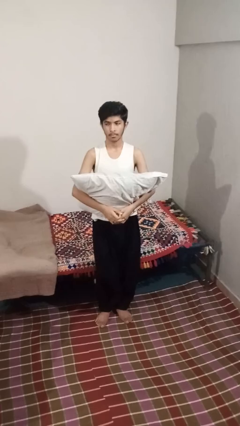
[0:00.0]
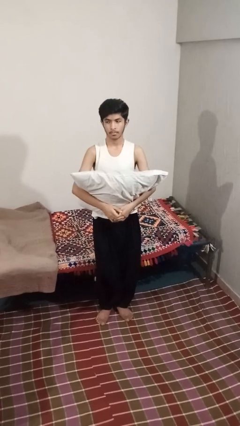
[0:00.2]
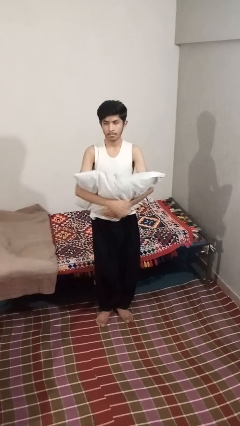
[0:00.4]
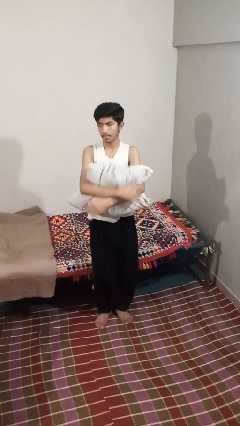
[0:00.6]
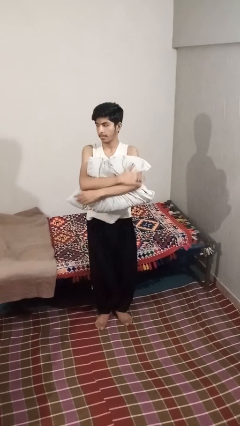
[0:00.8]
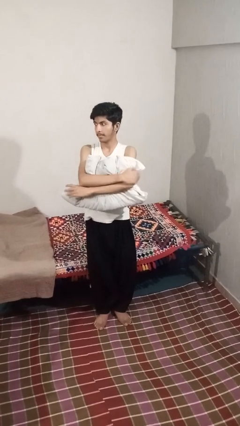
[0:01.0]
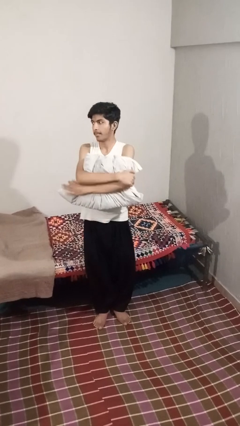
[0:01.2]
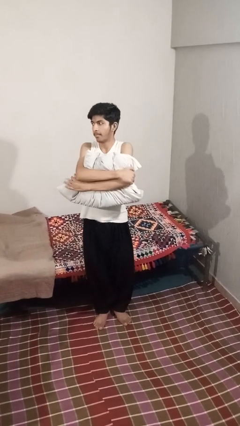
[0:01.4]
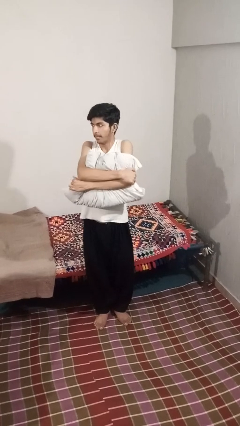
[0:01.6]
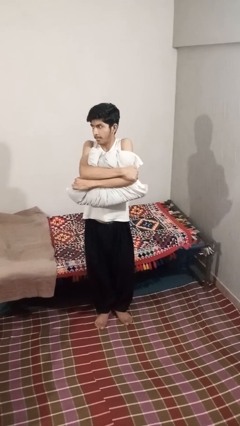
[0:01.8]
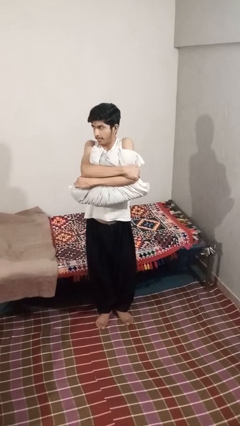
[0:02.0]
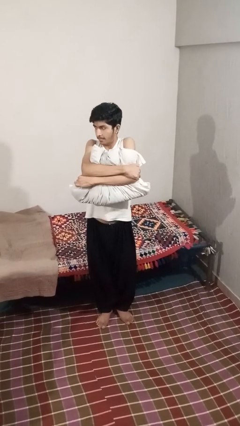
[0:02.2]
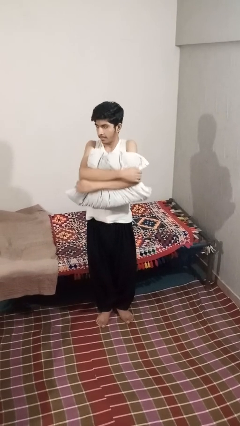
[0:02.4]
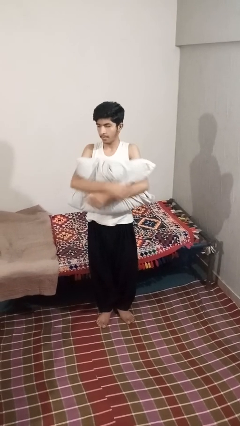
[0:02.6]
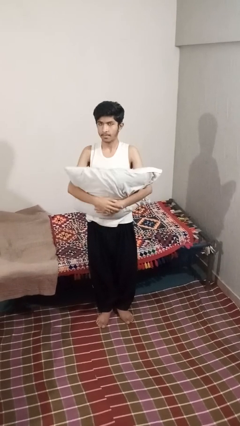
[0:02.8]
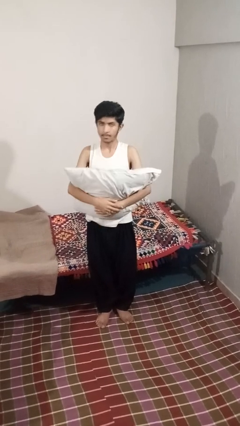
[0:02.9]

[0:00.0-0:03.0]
person squeezes object

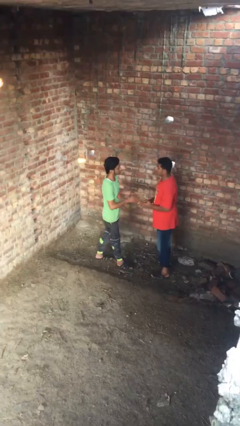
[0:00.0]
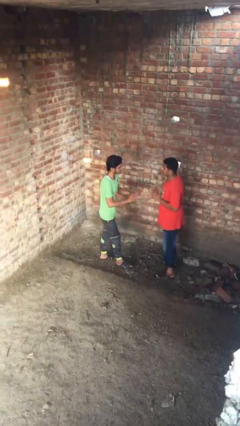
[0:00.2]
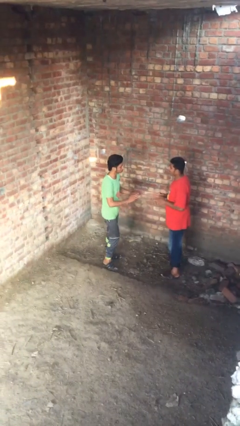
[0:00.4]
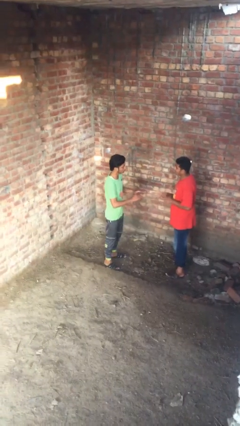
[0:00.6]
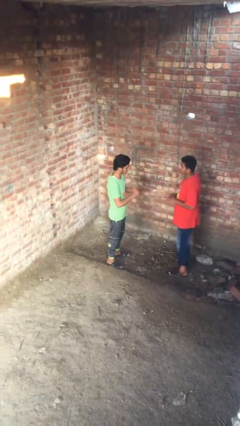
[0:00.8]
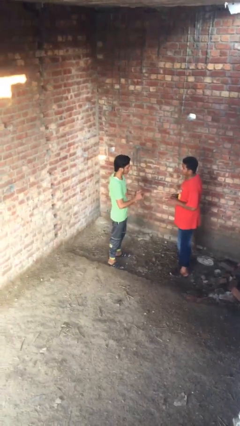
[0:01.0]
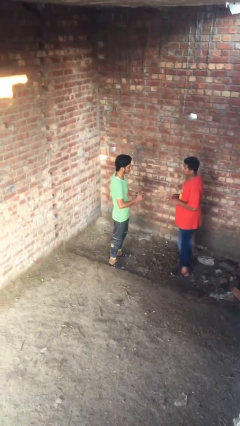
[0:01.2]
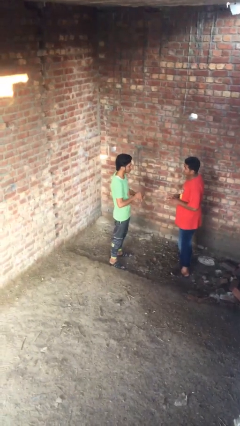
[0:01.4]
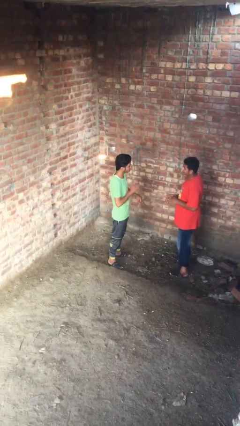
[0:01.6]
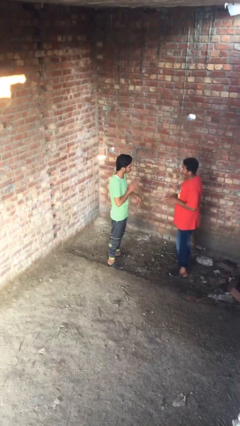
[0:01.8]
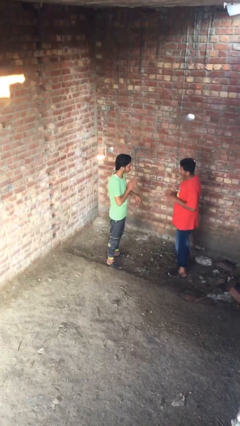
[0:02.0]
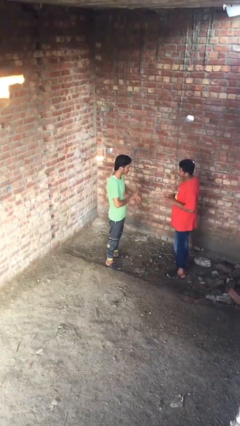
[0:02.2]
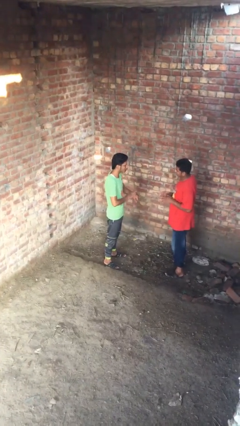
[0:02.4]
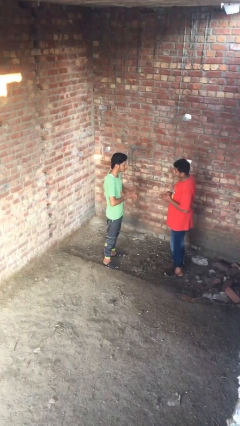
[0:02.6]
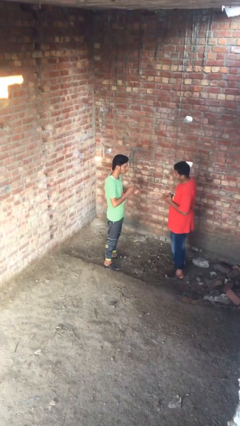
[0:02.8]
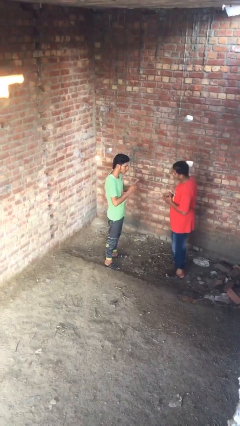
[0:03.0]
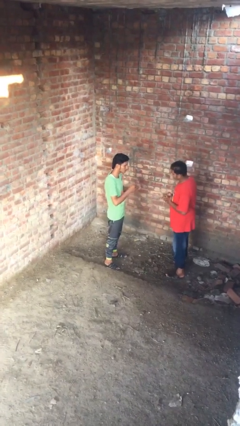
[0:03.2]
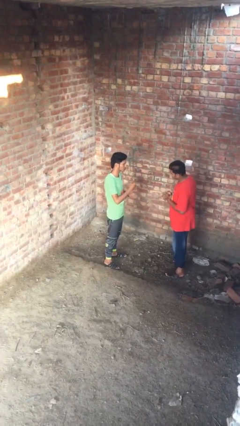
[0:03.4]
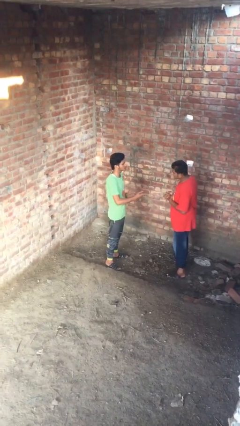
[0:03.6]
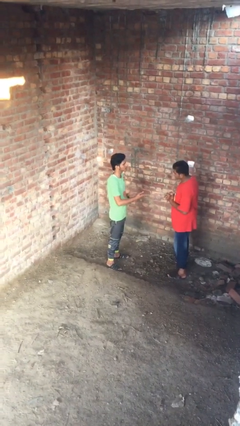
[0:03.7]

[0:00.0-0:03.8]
person talks to person

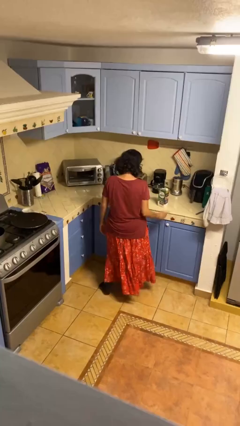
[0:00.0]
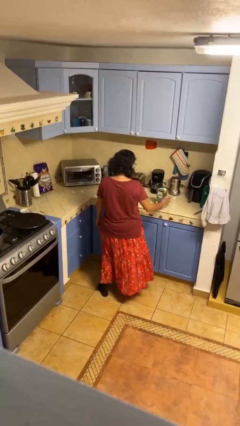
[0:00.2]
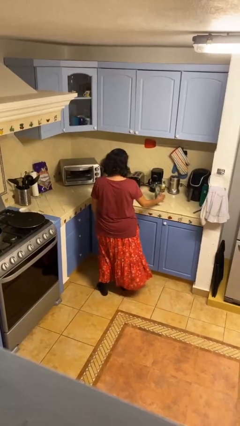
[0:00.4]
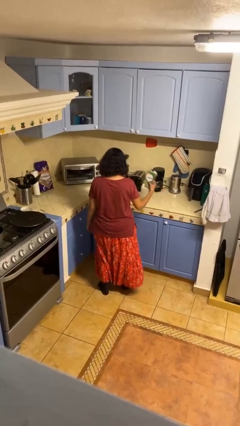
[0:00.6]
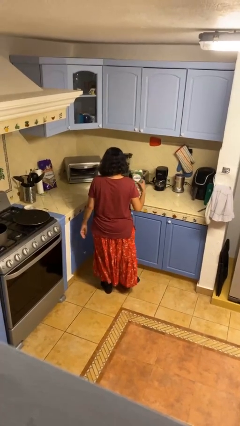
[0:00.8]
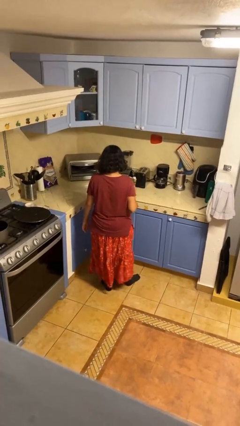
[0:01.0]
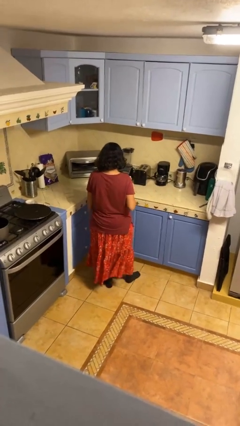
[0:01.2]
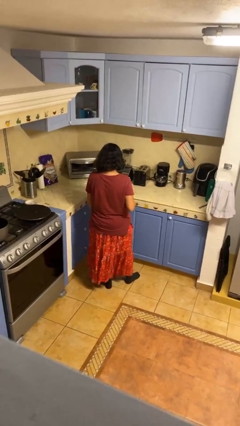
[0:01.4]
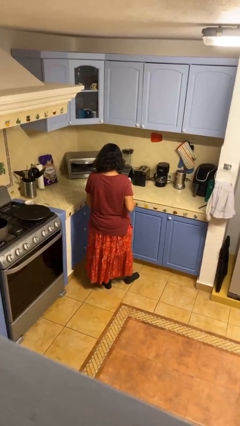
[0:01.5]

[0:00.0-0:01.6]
person picks up object from countertop

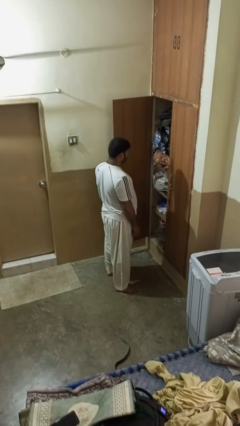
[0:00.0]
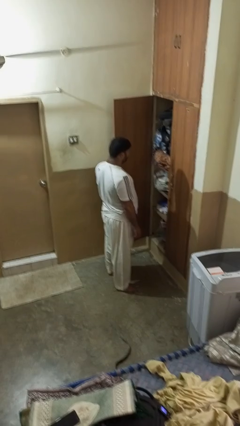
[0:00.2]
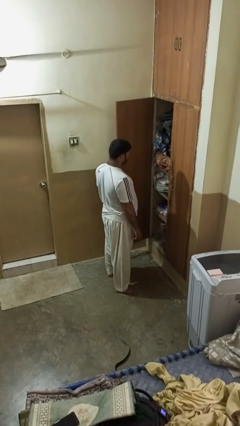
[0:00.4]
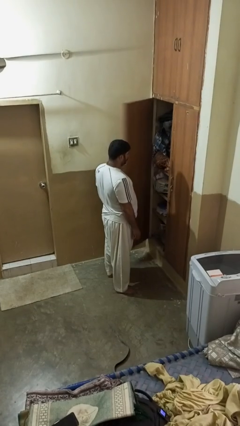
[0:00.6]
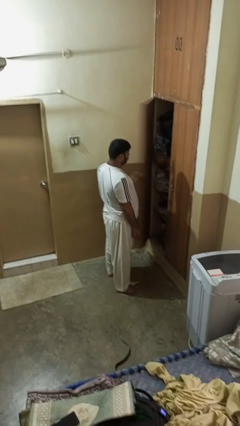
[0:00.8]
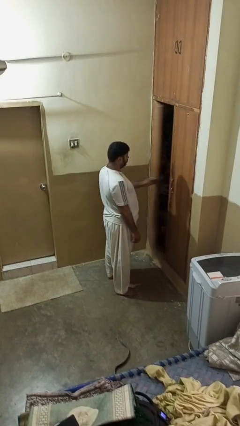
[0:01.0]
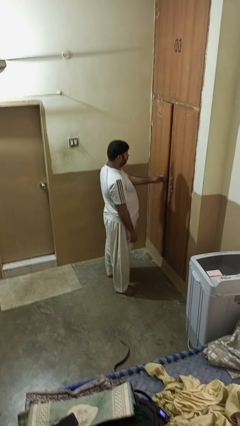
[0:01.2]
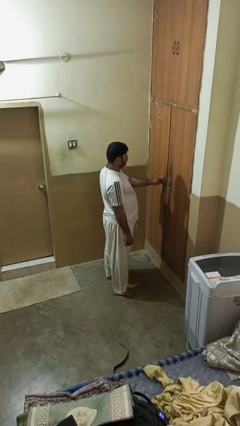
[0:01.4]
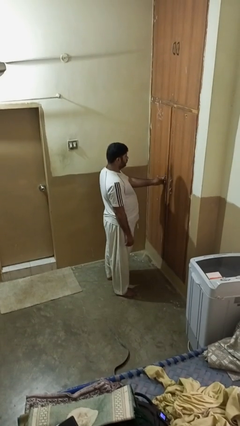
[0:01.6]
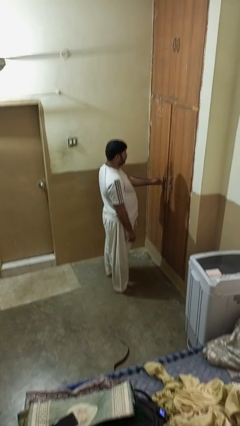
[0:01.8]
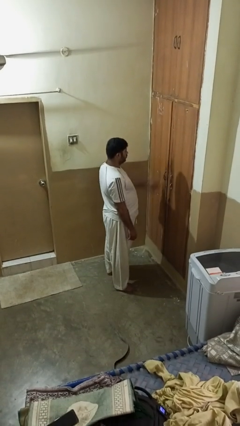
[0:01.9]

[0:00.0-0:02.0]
person closes closet door

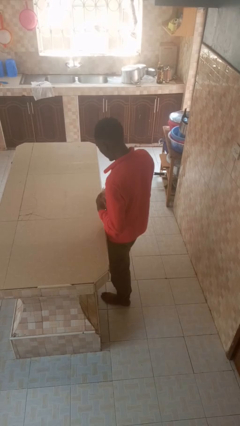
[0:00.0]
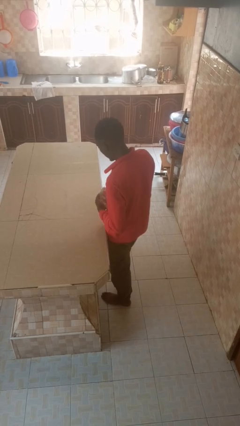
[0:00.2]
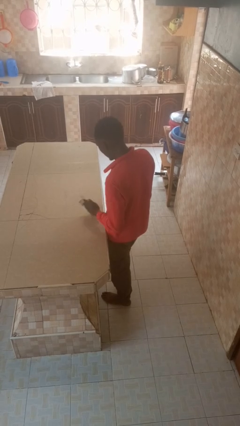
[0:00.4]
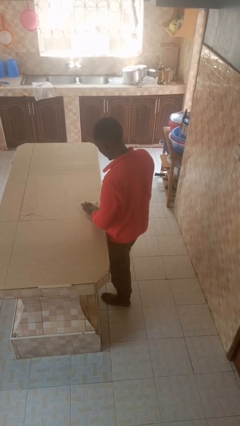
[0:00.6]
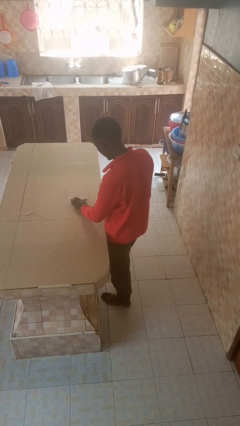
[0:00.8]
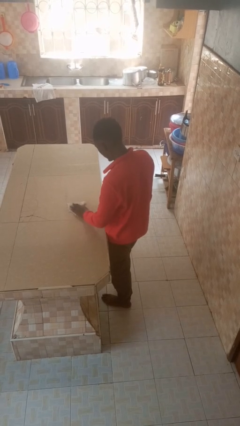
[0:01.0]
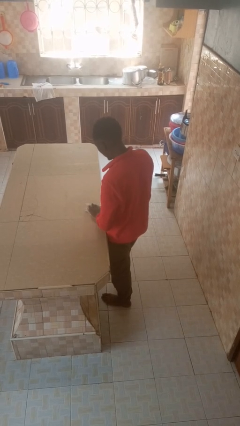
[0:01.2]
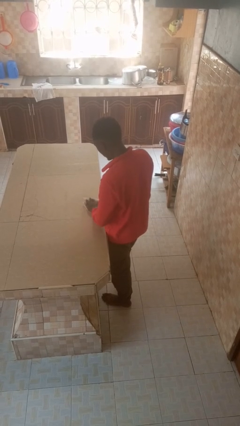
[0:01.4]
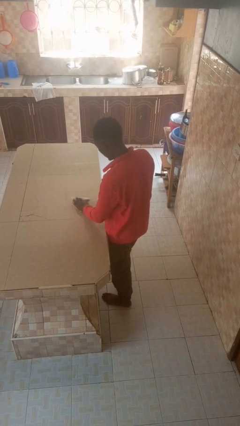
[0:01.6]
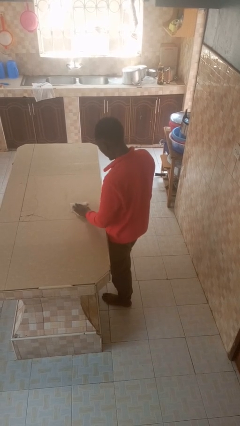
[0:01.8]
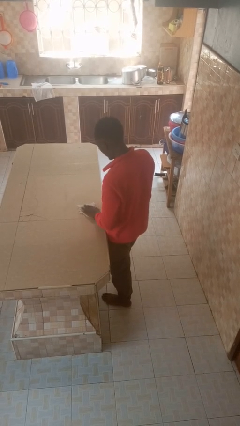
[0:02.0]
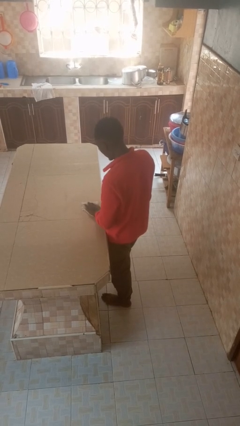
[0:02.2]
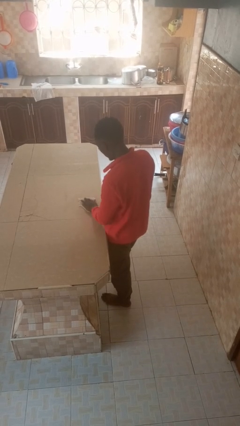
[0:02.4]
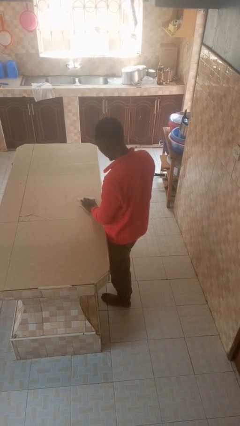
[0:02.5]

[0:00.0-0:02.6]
person cleans table with rag

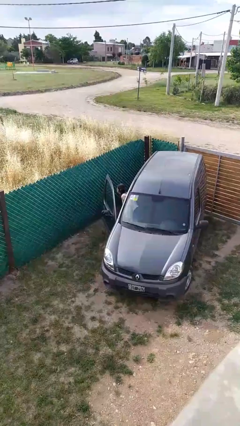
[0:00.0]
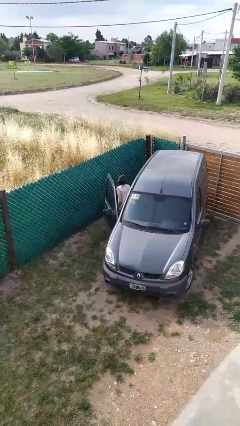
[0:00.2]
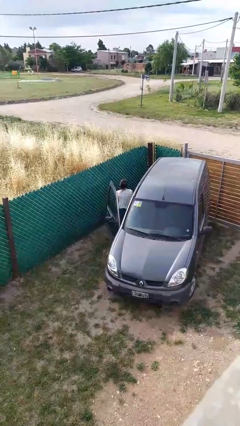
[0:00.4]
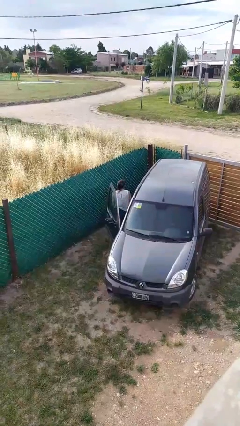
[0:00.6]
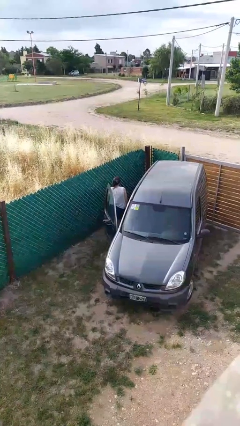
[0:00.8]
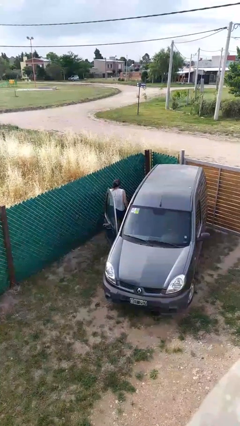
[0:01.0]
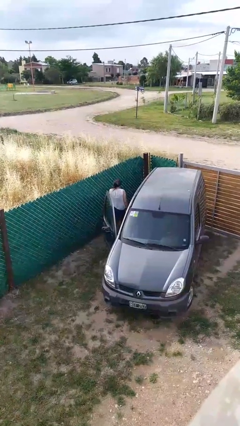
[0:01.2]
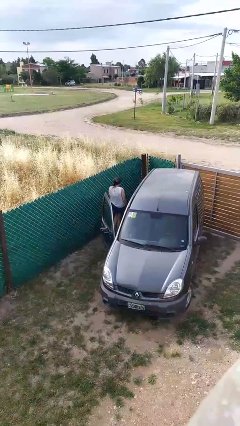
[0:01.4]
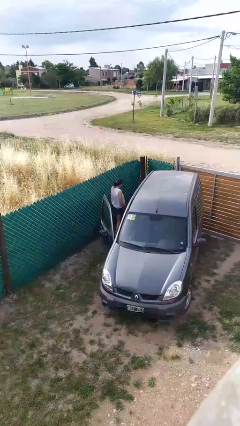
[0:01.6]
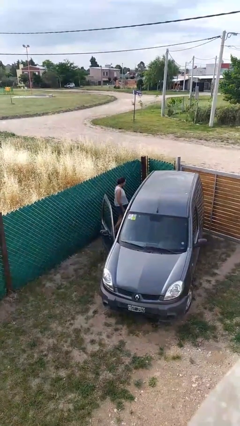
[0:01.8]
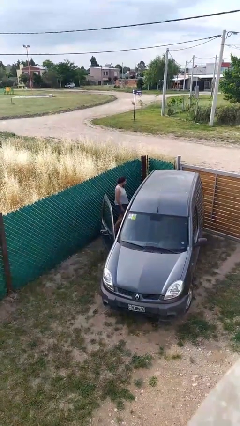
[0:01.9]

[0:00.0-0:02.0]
person exits car

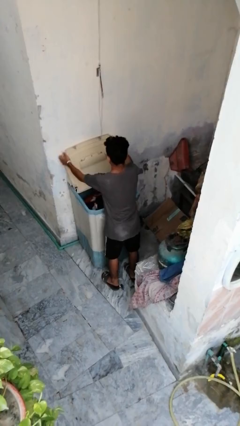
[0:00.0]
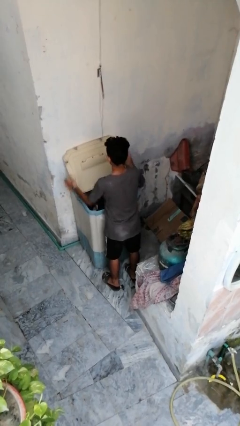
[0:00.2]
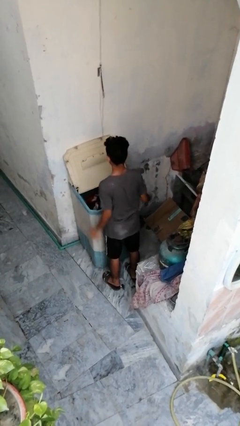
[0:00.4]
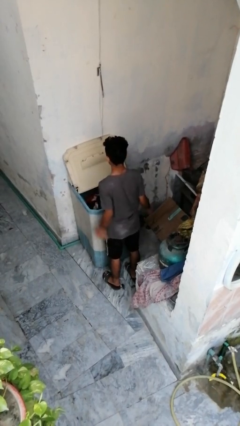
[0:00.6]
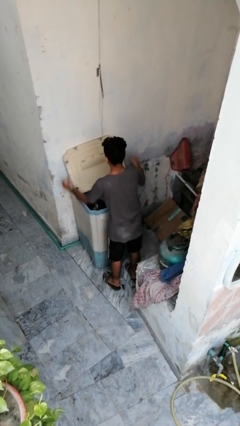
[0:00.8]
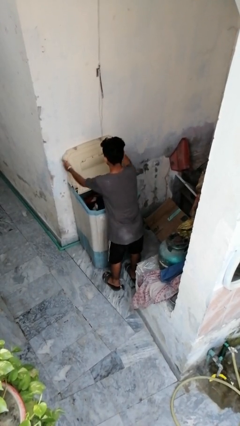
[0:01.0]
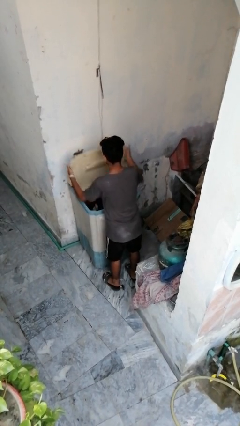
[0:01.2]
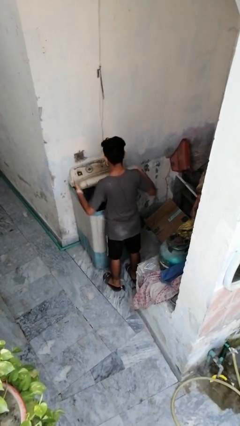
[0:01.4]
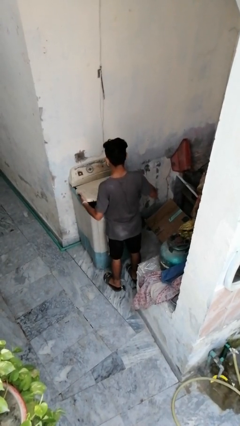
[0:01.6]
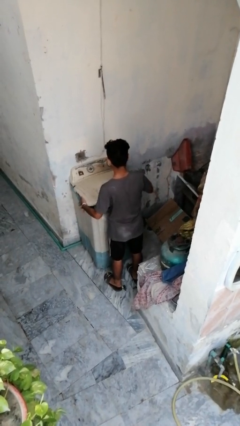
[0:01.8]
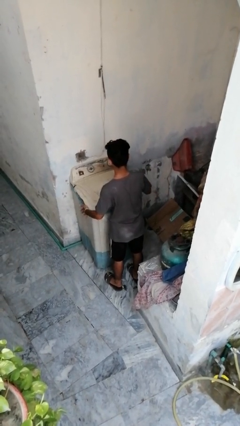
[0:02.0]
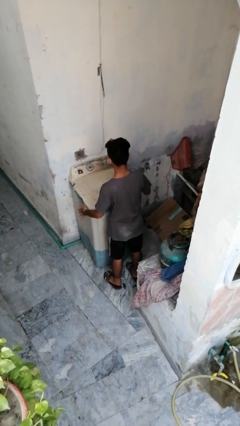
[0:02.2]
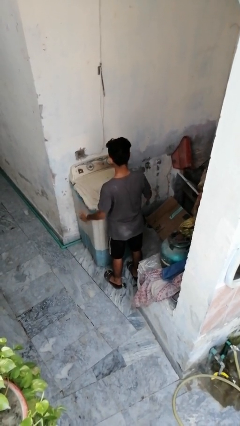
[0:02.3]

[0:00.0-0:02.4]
person closes clothes washer
